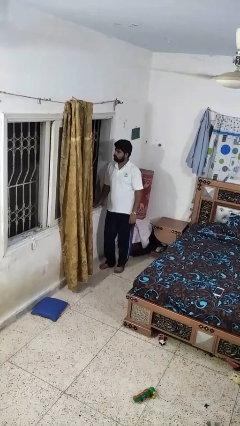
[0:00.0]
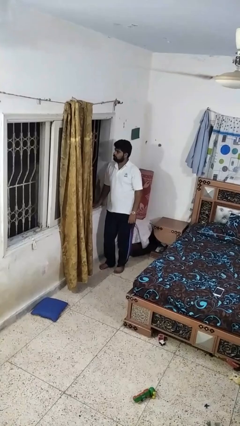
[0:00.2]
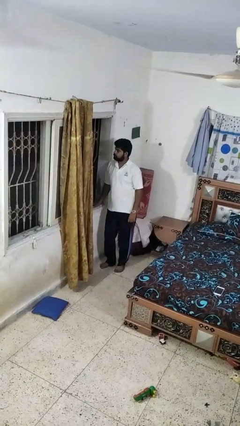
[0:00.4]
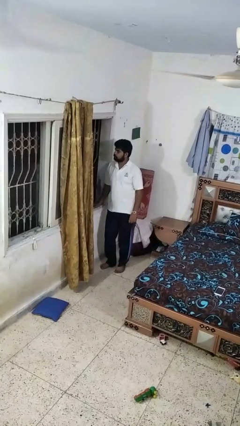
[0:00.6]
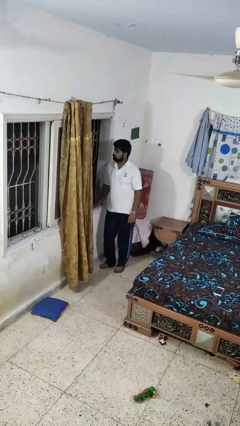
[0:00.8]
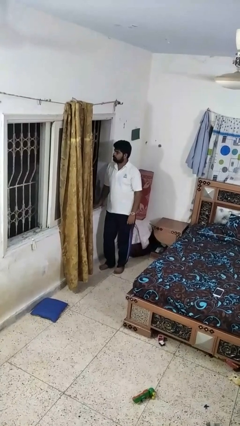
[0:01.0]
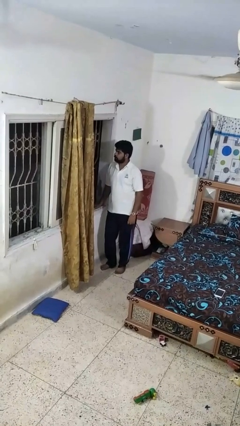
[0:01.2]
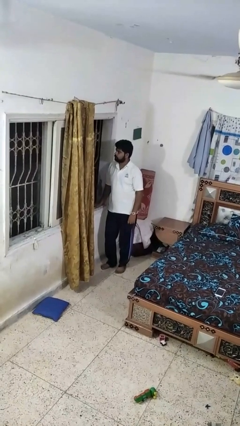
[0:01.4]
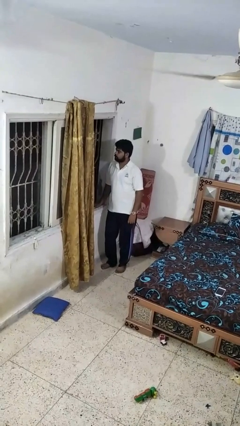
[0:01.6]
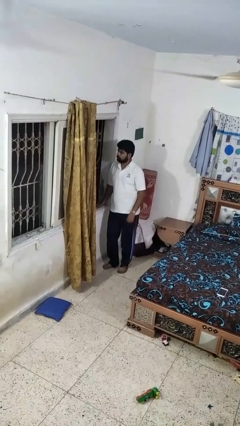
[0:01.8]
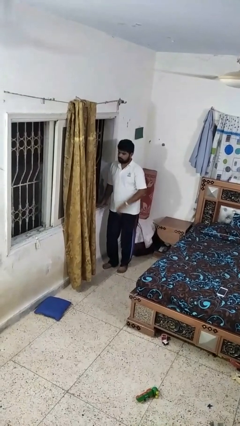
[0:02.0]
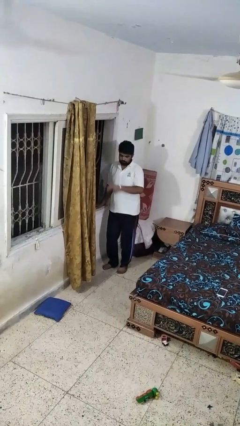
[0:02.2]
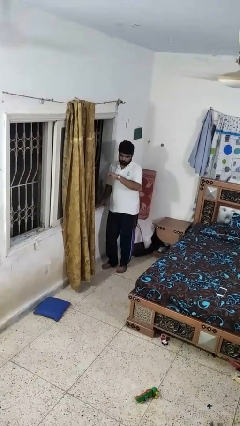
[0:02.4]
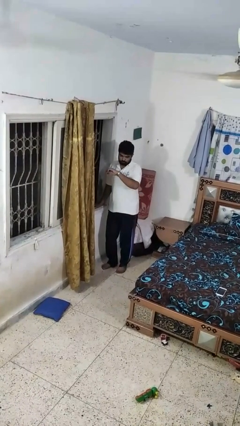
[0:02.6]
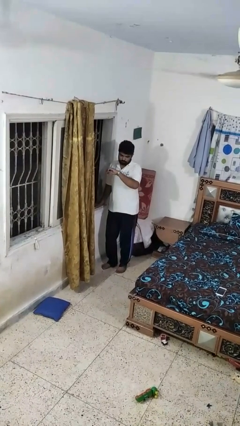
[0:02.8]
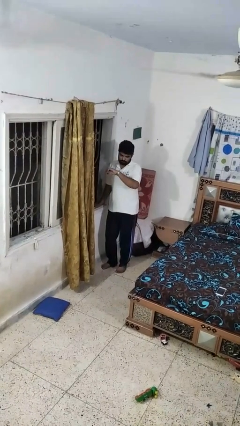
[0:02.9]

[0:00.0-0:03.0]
person looks at wristwatch

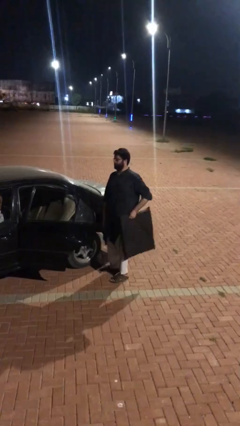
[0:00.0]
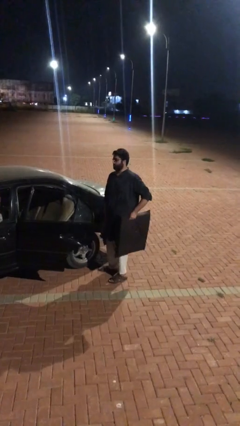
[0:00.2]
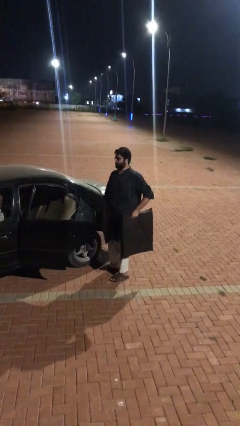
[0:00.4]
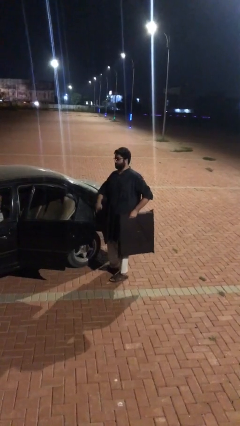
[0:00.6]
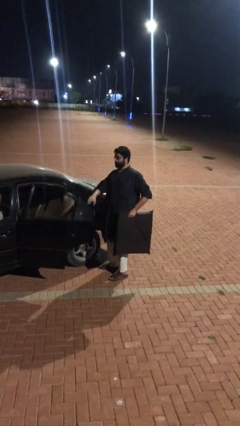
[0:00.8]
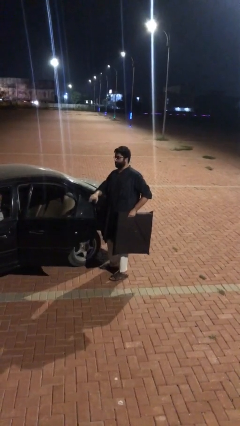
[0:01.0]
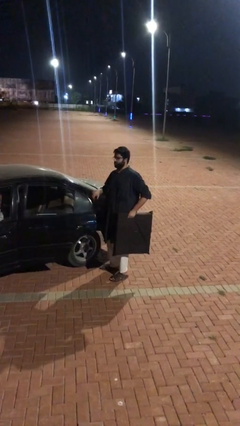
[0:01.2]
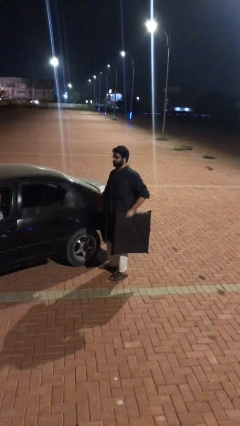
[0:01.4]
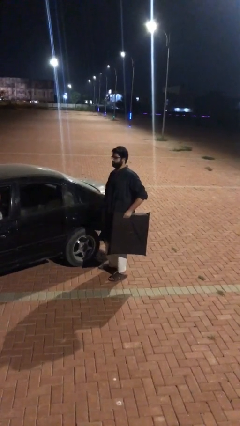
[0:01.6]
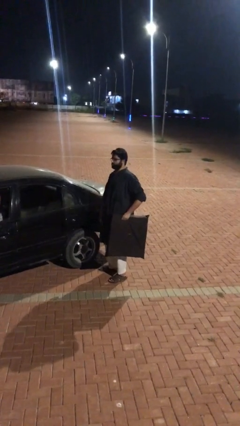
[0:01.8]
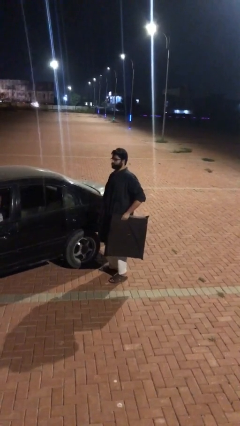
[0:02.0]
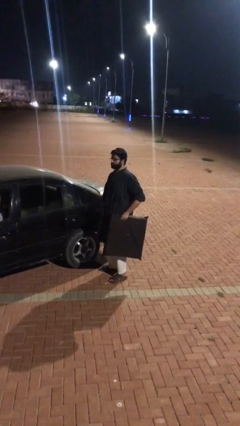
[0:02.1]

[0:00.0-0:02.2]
person closes car door

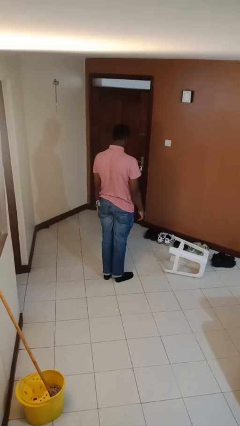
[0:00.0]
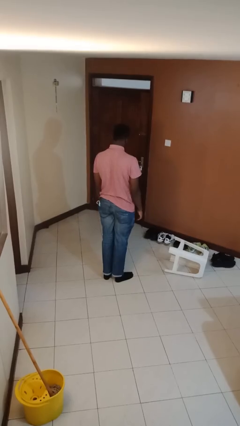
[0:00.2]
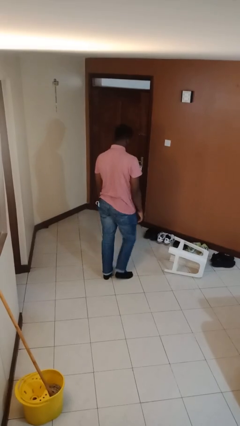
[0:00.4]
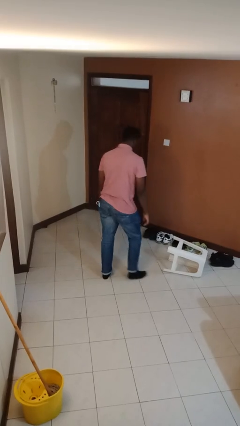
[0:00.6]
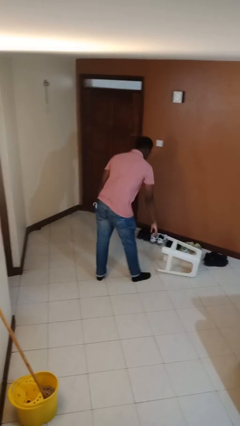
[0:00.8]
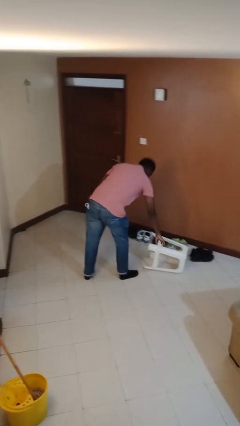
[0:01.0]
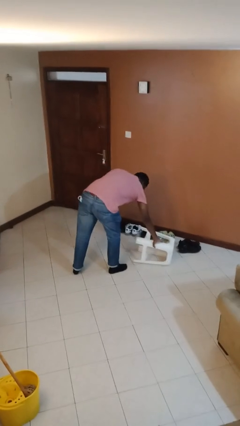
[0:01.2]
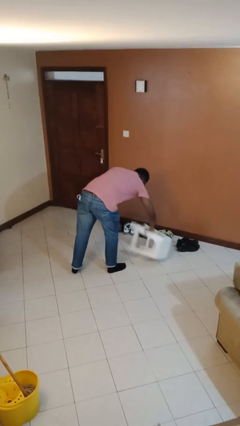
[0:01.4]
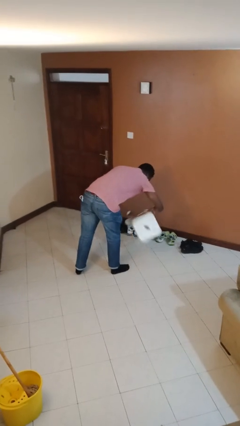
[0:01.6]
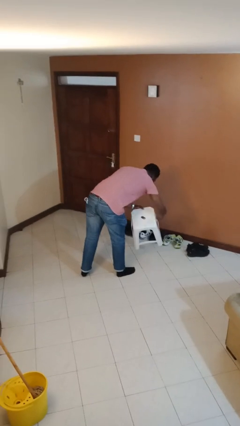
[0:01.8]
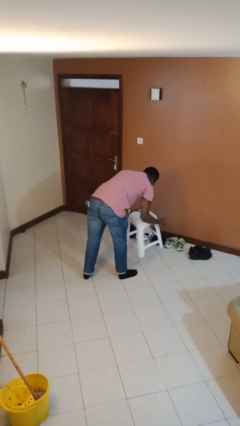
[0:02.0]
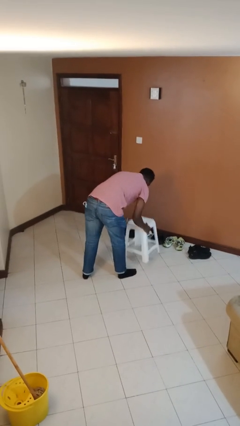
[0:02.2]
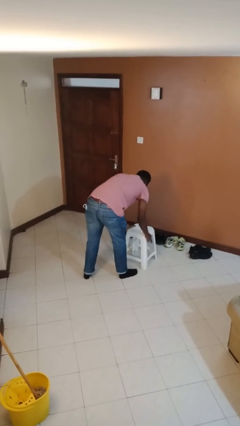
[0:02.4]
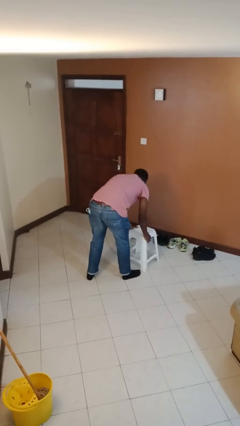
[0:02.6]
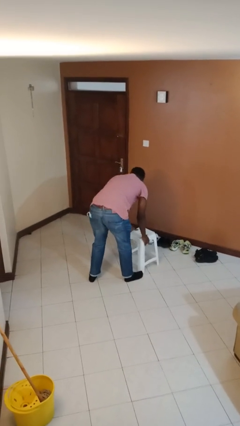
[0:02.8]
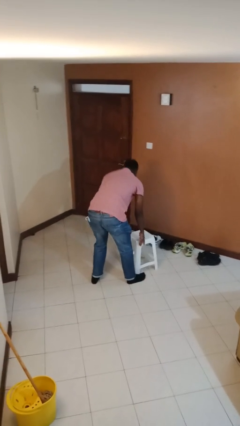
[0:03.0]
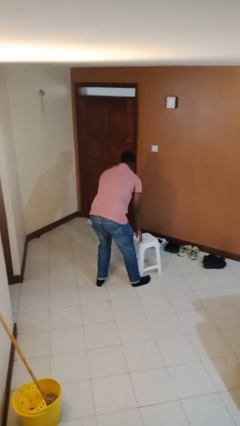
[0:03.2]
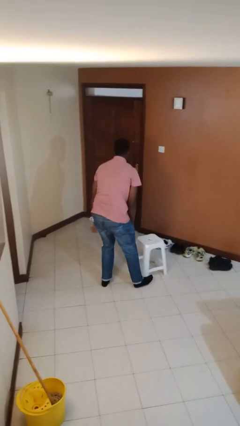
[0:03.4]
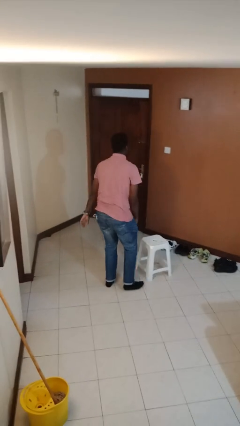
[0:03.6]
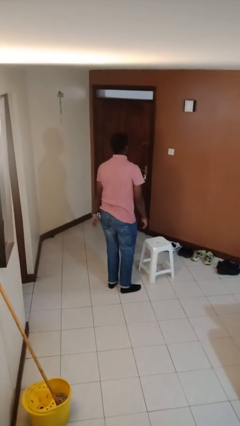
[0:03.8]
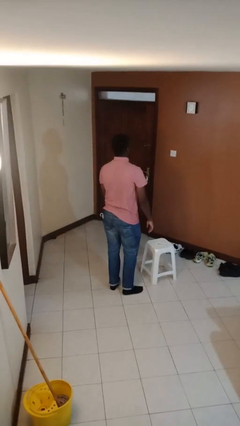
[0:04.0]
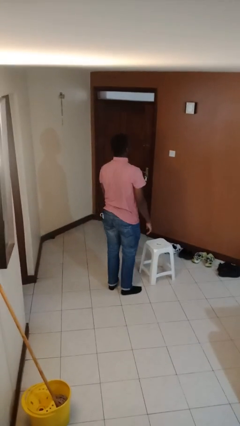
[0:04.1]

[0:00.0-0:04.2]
person sets upright furniture

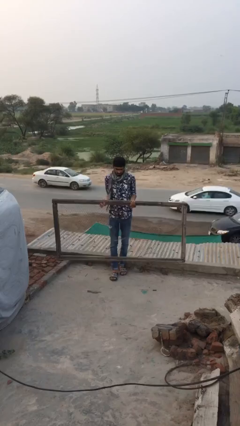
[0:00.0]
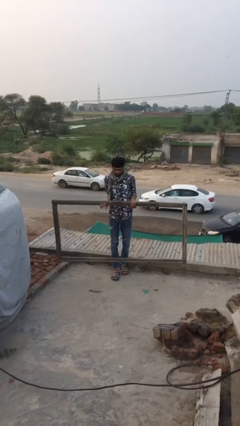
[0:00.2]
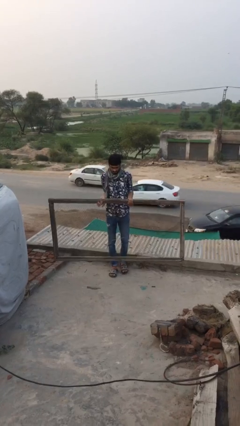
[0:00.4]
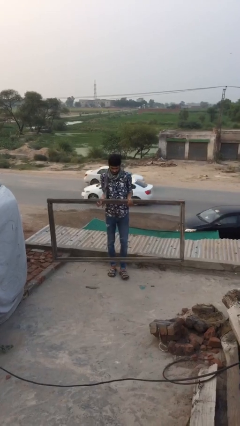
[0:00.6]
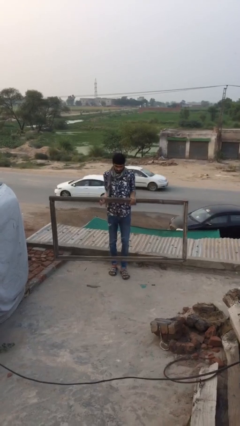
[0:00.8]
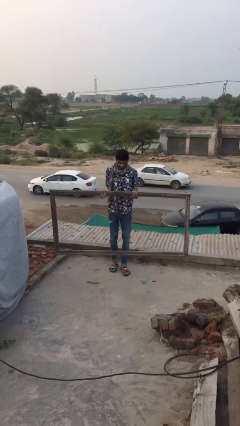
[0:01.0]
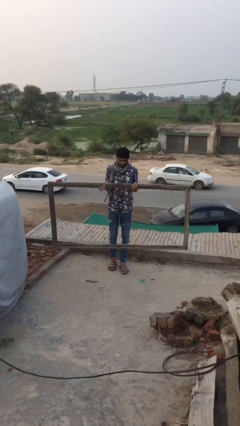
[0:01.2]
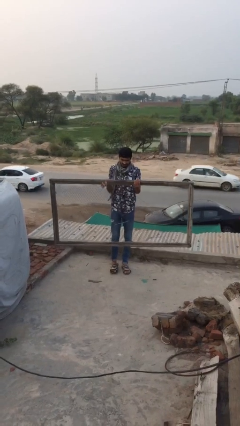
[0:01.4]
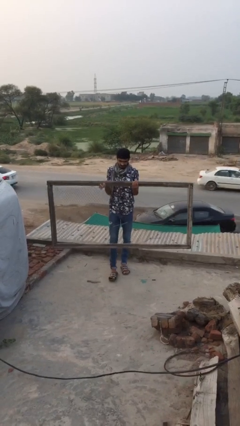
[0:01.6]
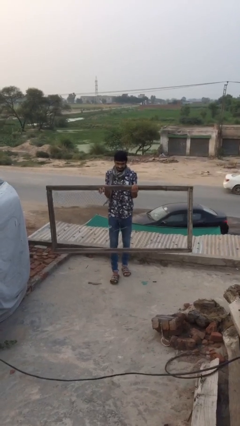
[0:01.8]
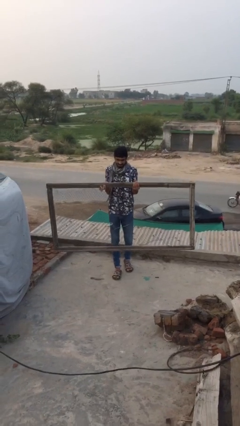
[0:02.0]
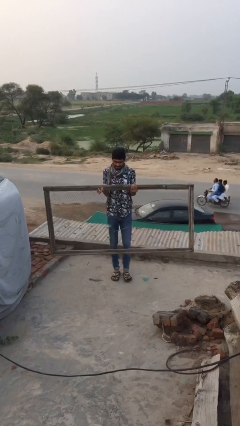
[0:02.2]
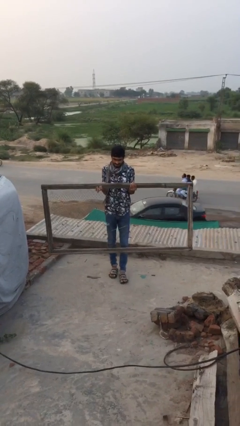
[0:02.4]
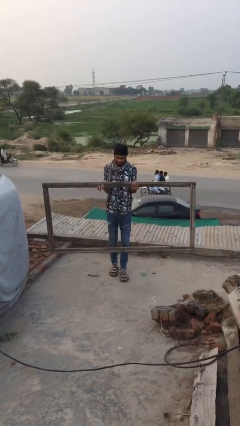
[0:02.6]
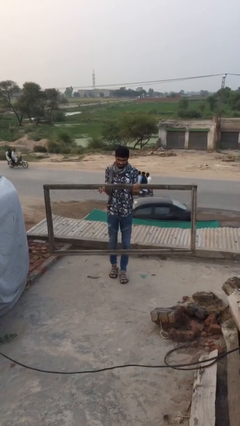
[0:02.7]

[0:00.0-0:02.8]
person carries heavy object

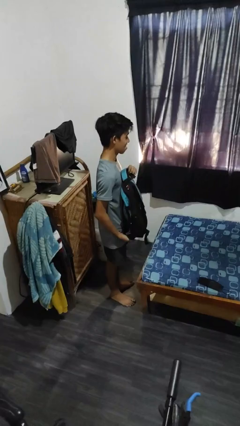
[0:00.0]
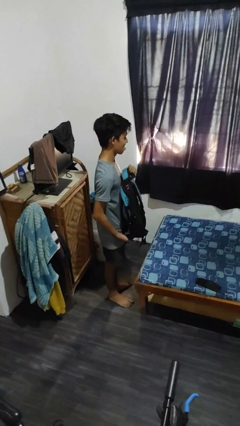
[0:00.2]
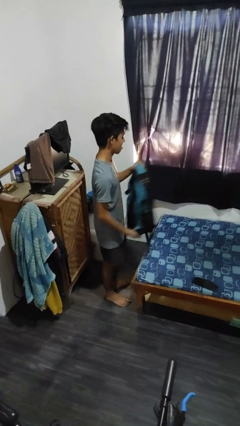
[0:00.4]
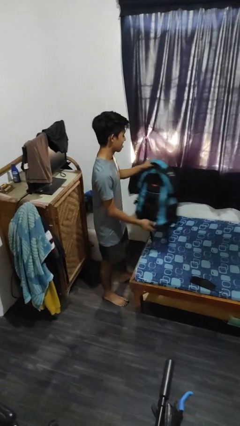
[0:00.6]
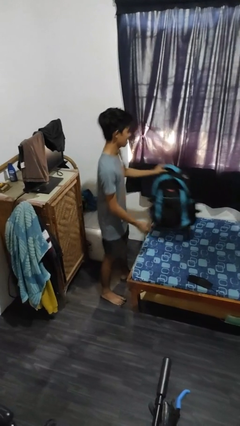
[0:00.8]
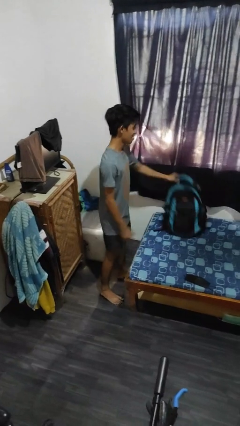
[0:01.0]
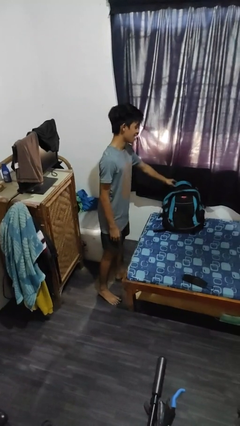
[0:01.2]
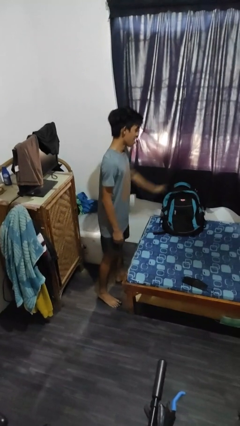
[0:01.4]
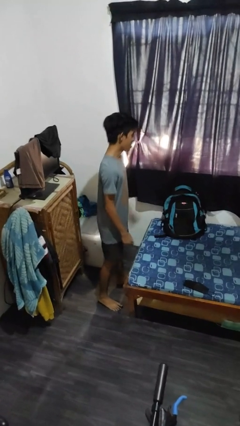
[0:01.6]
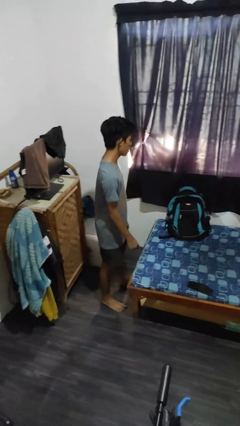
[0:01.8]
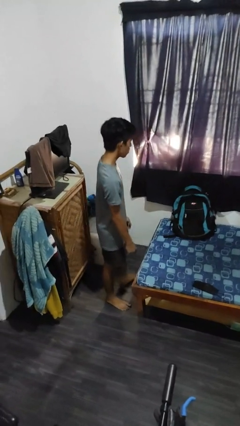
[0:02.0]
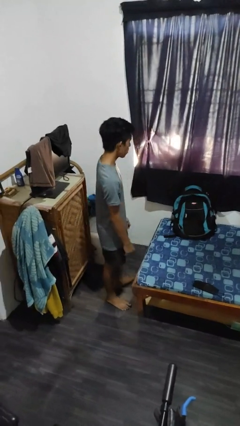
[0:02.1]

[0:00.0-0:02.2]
person puts down object on bed

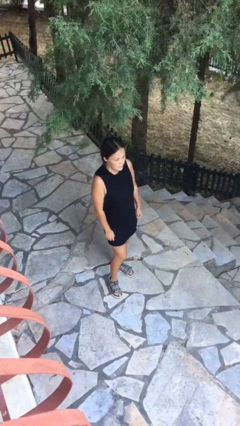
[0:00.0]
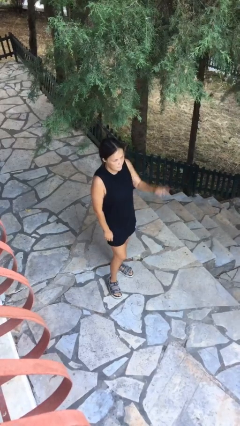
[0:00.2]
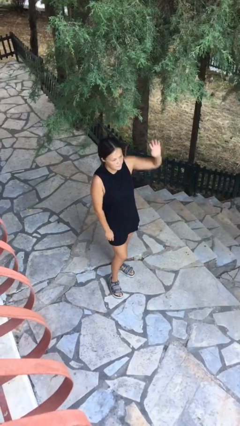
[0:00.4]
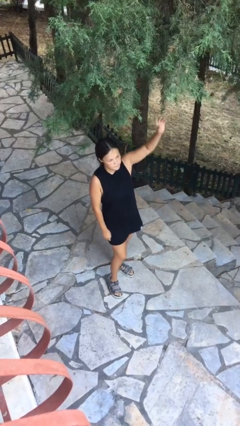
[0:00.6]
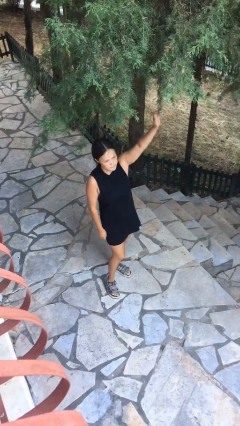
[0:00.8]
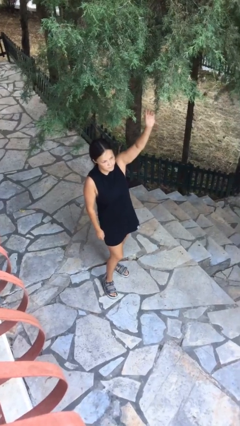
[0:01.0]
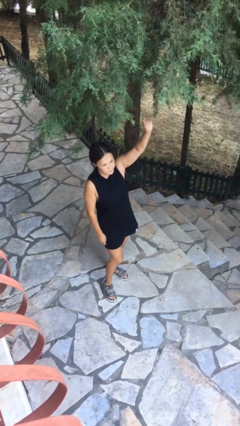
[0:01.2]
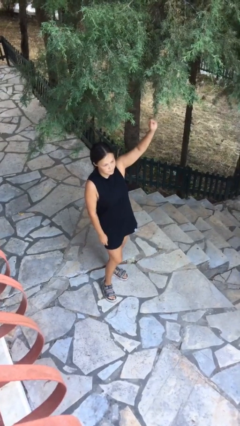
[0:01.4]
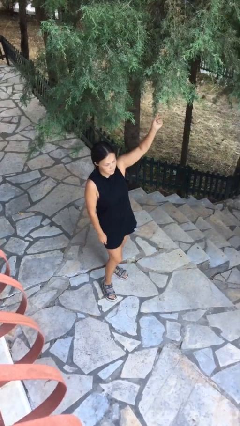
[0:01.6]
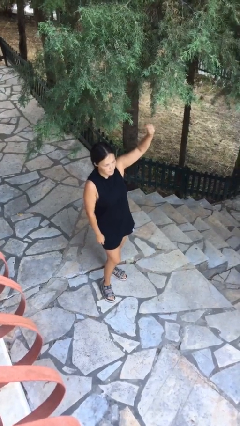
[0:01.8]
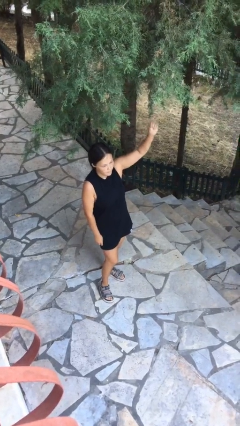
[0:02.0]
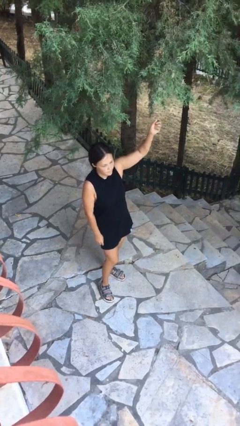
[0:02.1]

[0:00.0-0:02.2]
person gestures raise hand

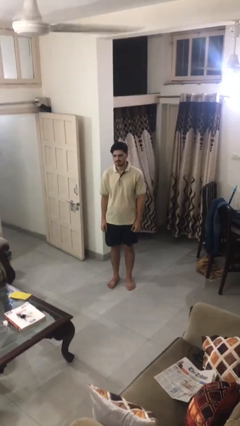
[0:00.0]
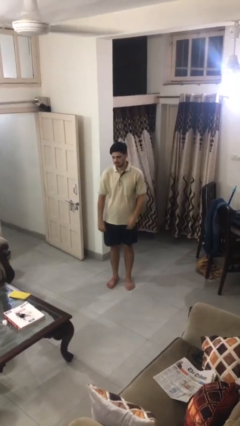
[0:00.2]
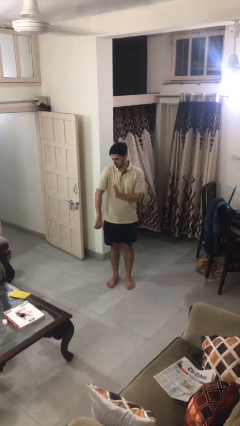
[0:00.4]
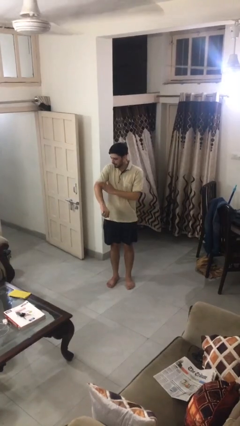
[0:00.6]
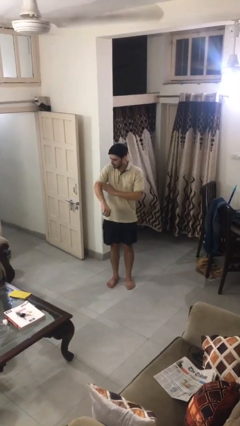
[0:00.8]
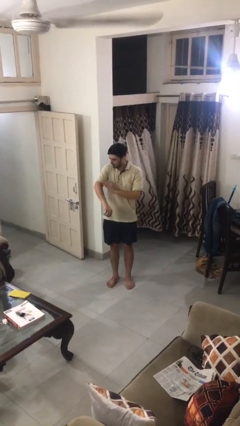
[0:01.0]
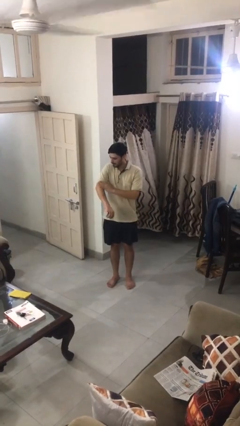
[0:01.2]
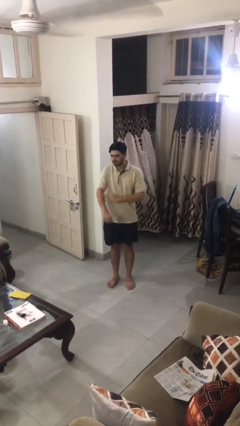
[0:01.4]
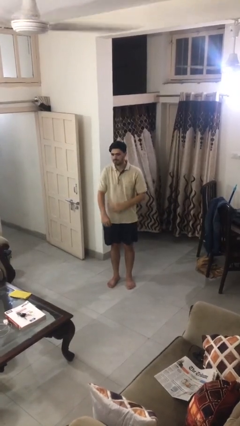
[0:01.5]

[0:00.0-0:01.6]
person swats bug
